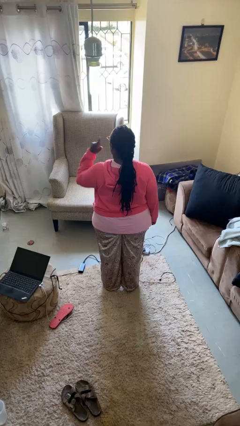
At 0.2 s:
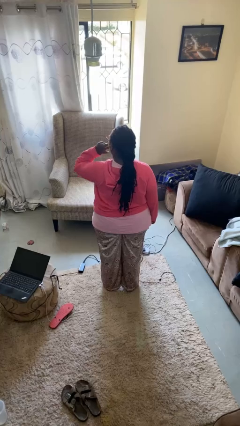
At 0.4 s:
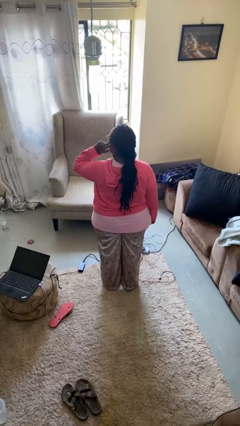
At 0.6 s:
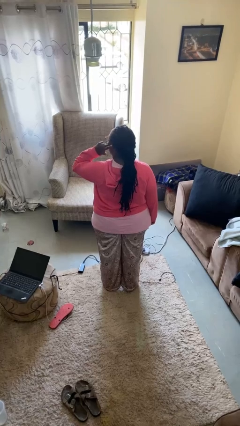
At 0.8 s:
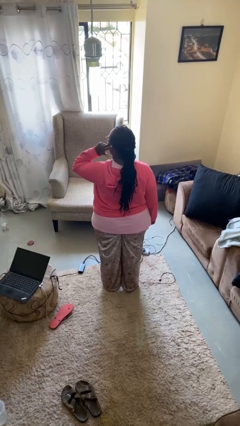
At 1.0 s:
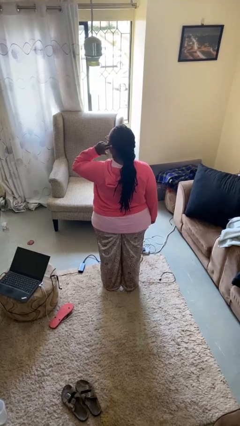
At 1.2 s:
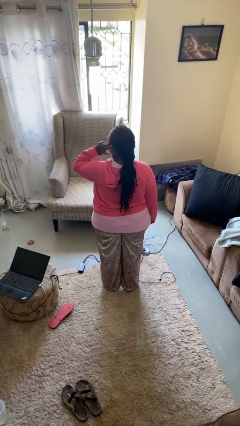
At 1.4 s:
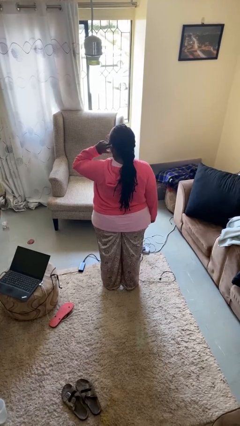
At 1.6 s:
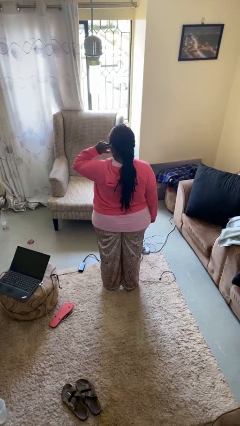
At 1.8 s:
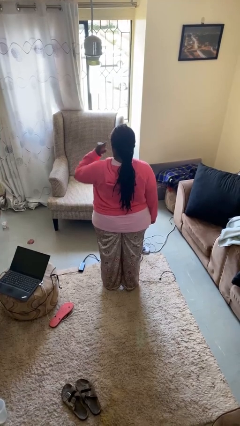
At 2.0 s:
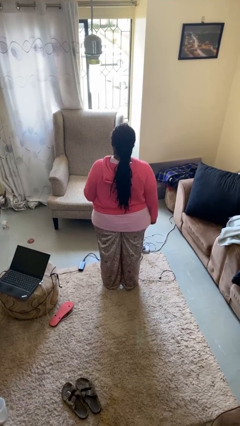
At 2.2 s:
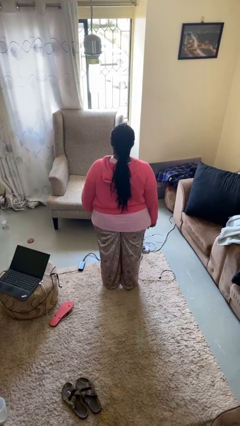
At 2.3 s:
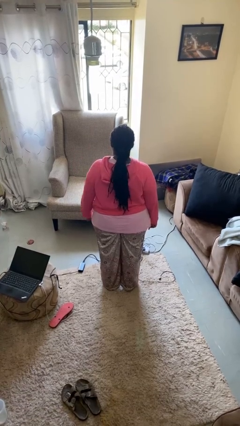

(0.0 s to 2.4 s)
person gestures listen closely

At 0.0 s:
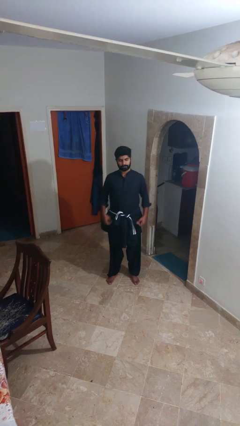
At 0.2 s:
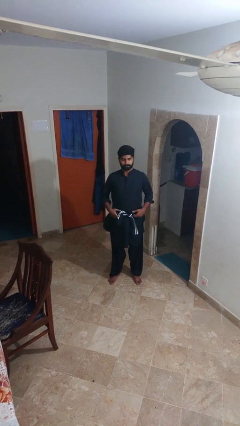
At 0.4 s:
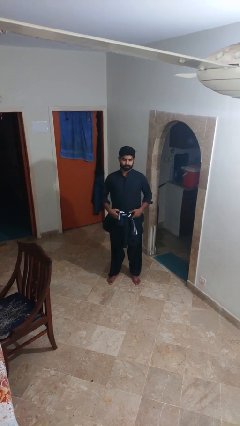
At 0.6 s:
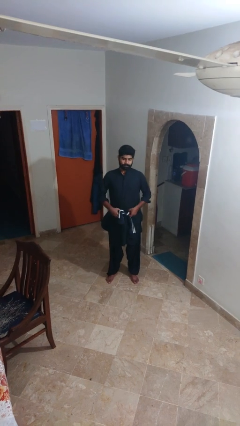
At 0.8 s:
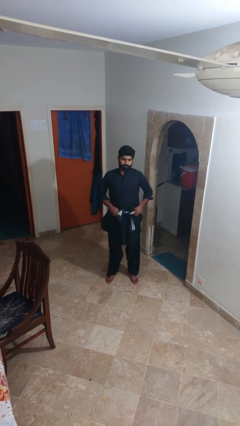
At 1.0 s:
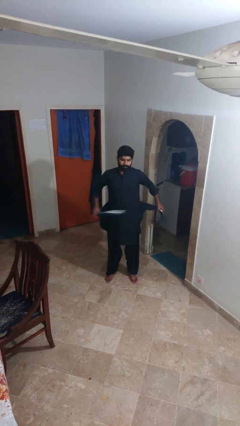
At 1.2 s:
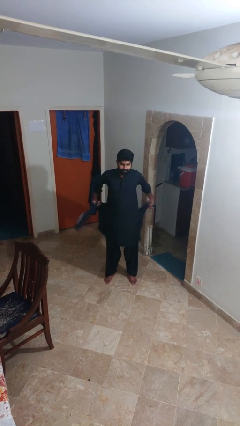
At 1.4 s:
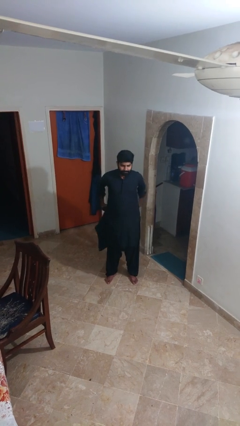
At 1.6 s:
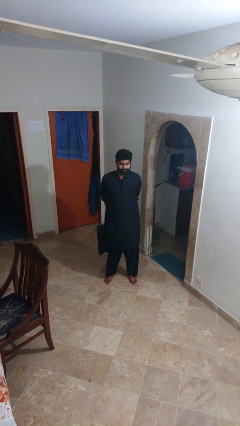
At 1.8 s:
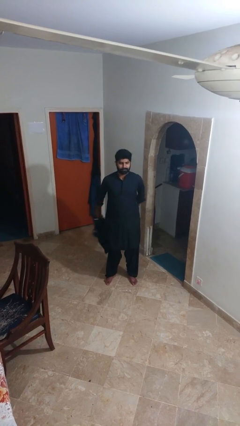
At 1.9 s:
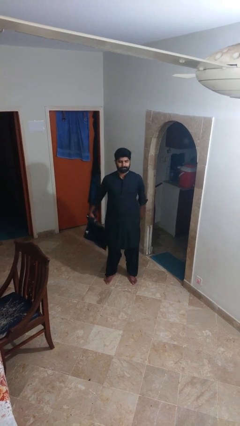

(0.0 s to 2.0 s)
person unties jacket around waist

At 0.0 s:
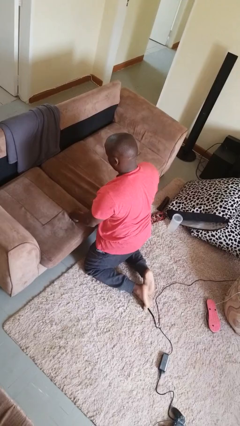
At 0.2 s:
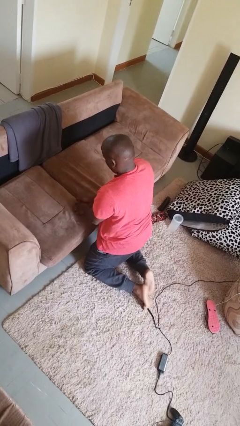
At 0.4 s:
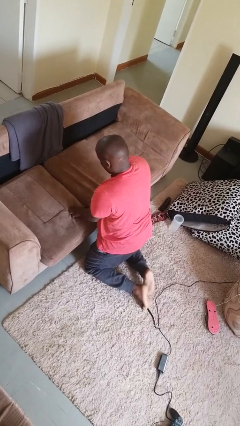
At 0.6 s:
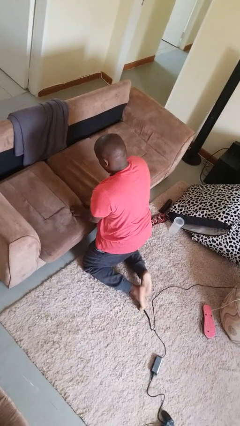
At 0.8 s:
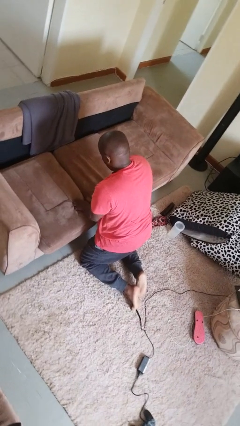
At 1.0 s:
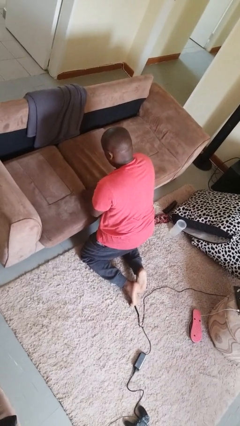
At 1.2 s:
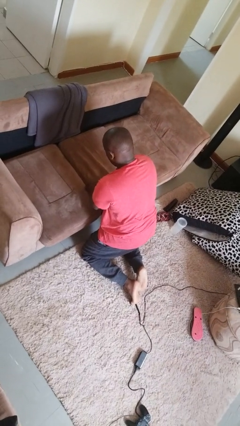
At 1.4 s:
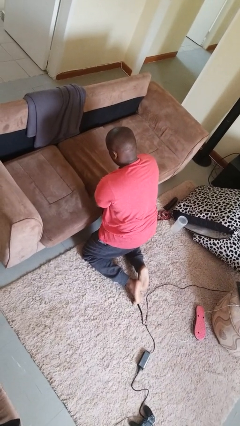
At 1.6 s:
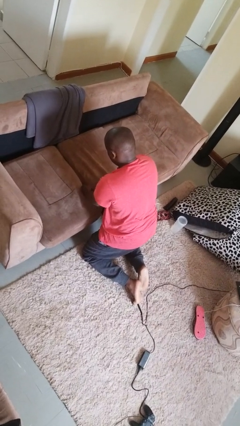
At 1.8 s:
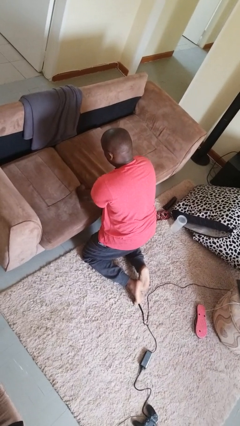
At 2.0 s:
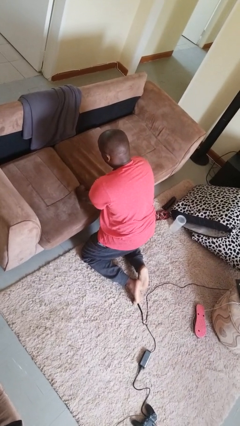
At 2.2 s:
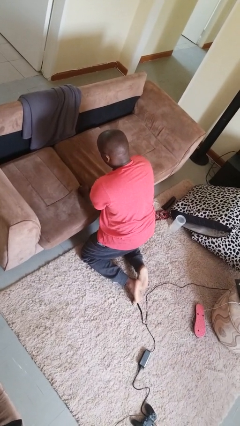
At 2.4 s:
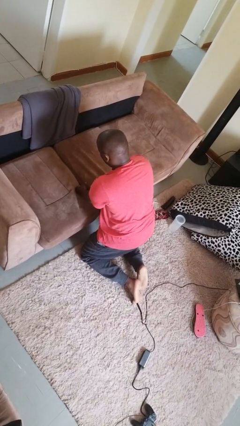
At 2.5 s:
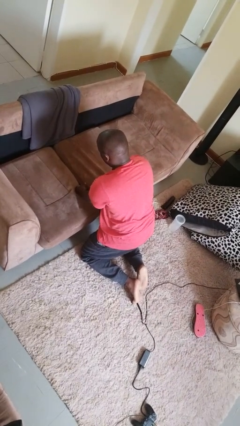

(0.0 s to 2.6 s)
person searches in couch

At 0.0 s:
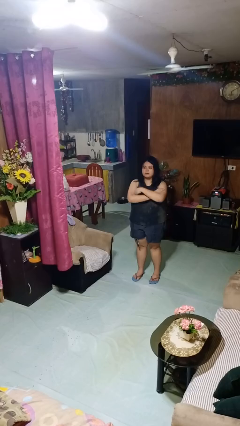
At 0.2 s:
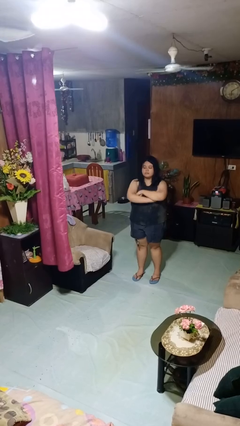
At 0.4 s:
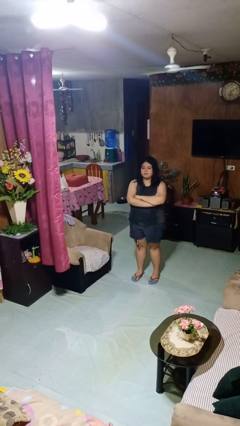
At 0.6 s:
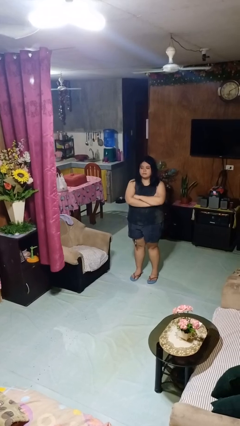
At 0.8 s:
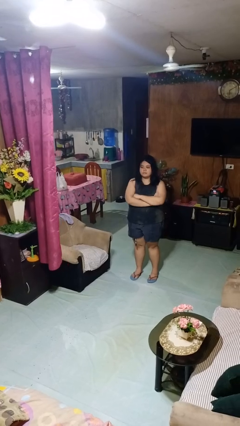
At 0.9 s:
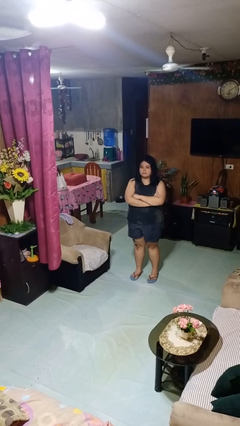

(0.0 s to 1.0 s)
person crosses arms

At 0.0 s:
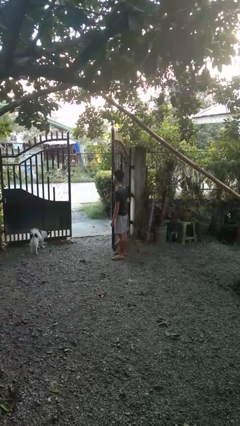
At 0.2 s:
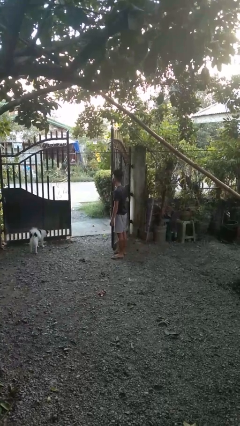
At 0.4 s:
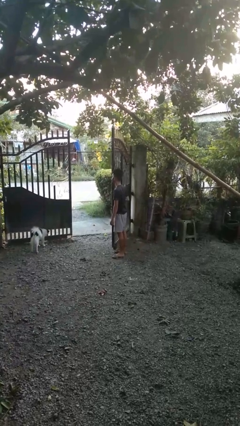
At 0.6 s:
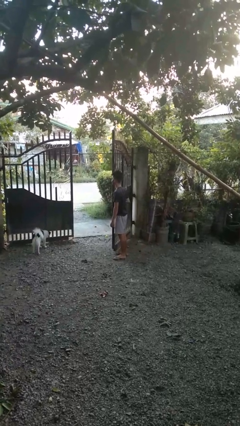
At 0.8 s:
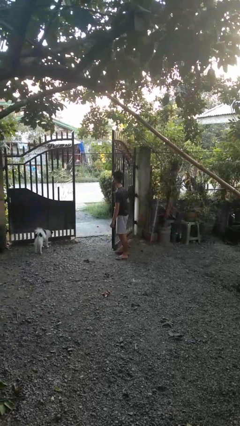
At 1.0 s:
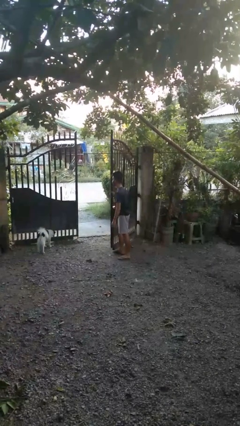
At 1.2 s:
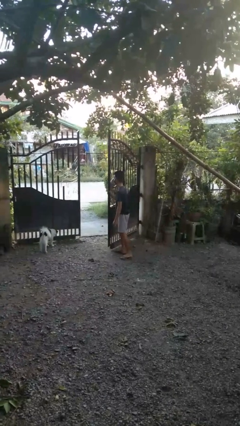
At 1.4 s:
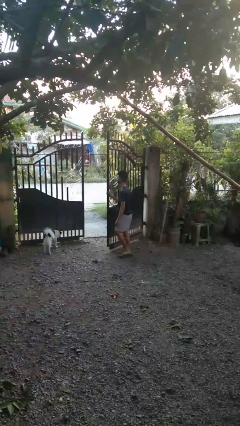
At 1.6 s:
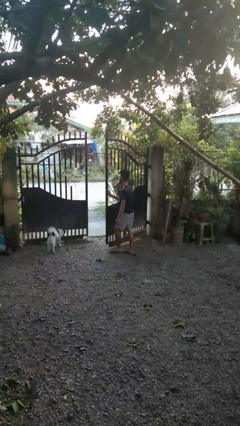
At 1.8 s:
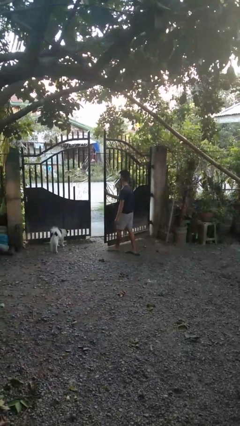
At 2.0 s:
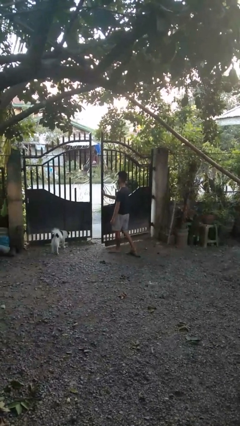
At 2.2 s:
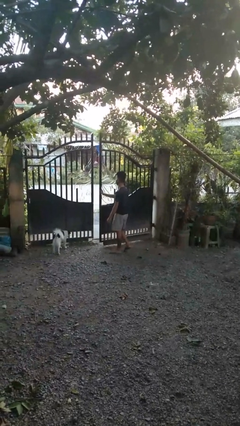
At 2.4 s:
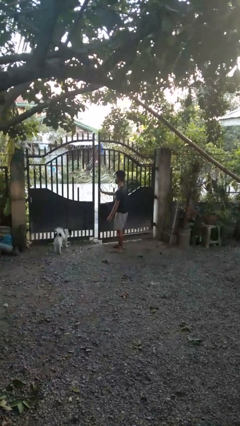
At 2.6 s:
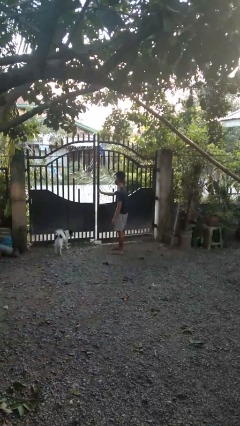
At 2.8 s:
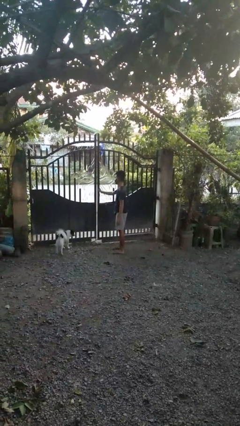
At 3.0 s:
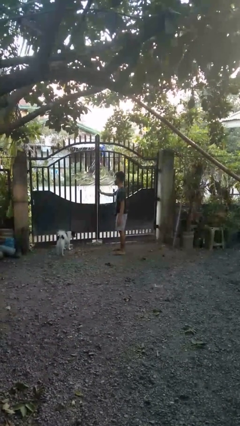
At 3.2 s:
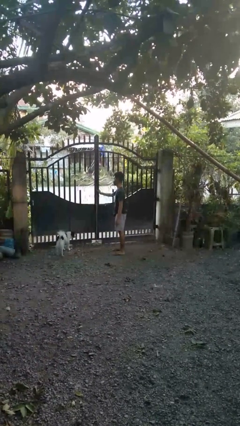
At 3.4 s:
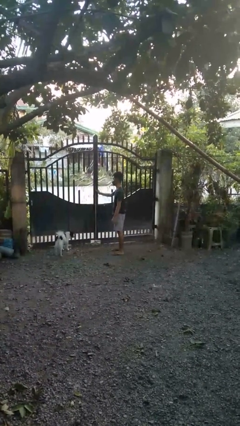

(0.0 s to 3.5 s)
person closes gate

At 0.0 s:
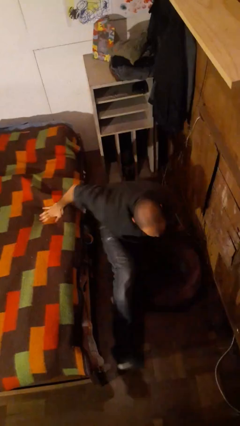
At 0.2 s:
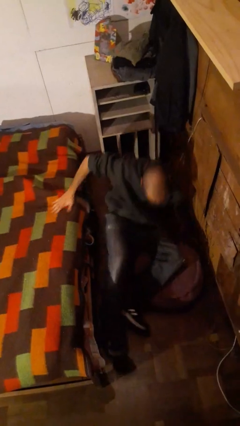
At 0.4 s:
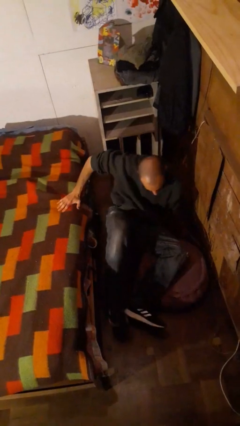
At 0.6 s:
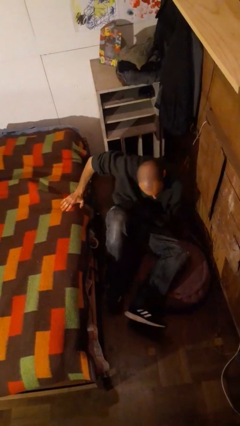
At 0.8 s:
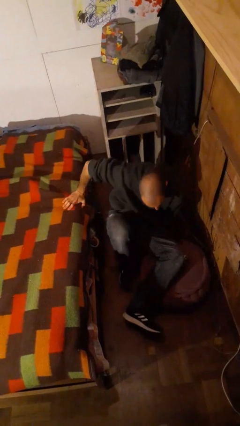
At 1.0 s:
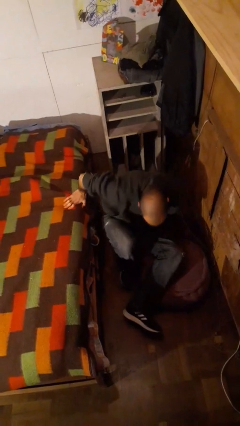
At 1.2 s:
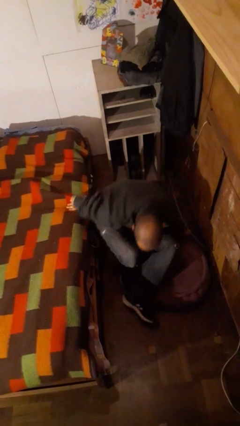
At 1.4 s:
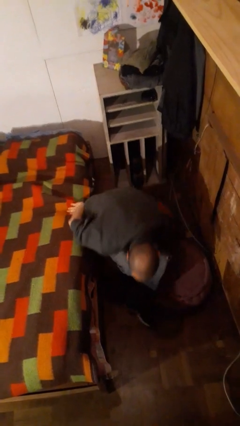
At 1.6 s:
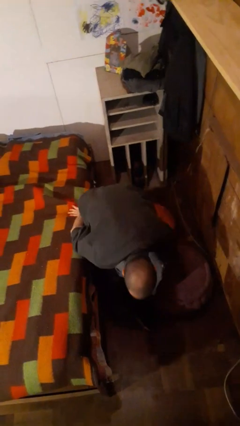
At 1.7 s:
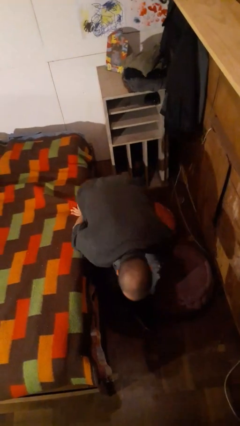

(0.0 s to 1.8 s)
person falls from bed

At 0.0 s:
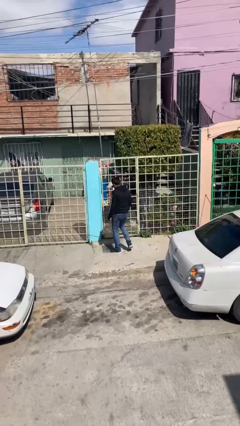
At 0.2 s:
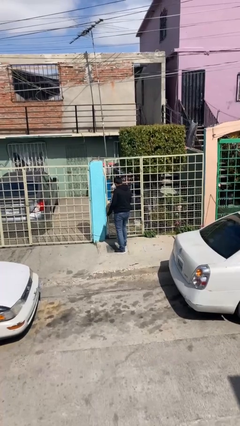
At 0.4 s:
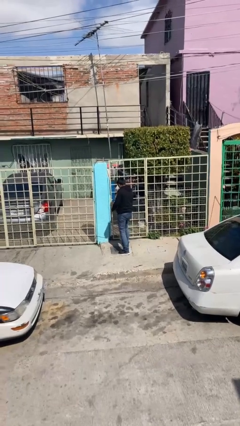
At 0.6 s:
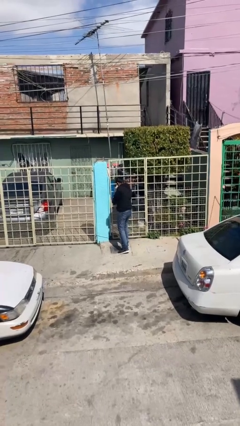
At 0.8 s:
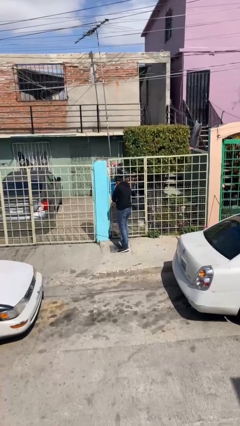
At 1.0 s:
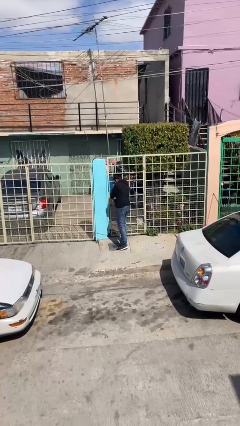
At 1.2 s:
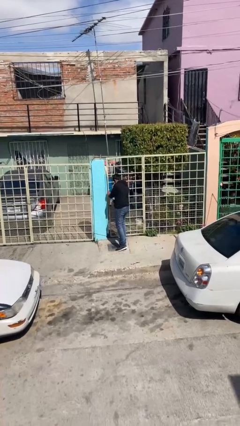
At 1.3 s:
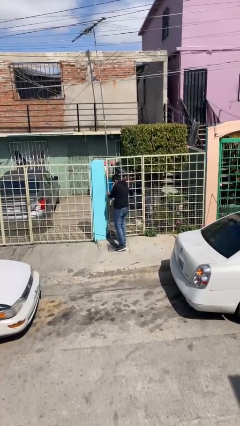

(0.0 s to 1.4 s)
person opens facility door

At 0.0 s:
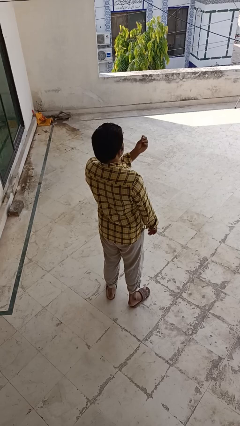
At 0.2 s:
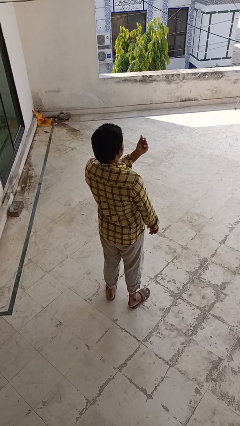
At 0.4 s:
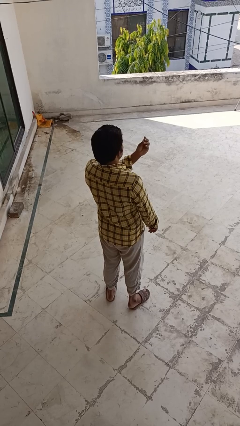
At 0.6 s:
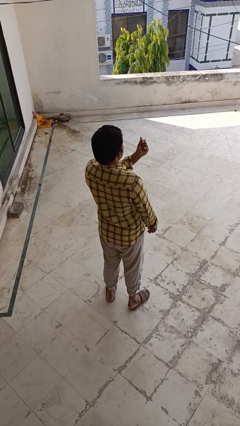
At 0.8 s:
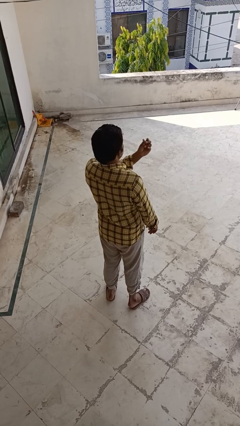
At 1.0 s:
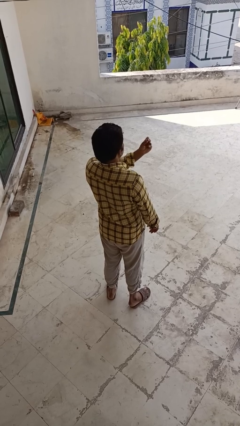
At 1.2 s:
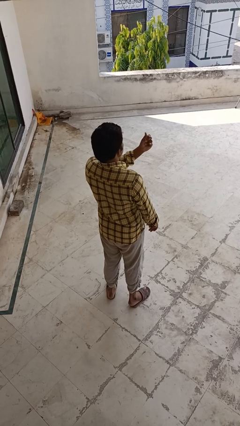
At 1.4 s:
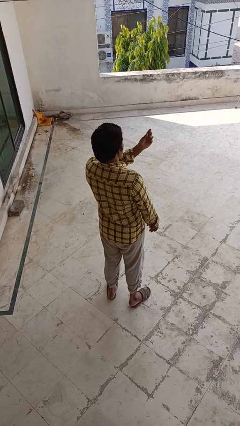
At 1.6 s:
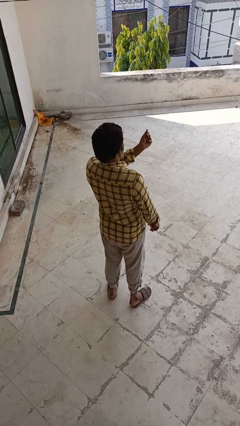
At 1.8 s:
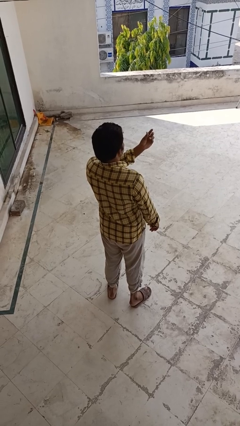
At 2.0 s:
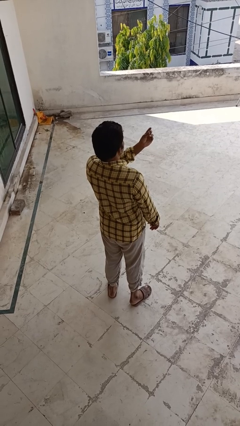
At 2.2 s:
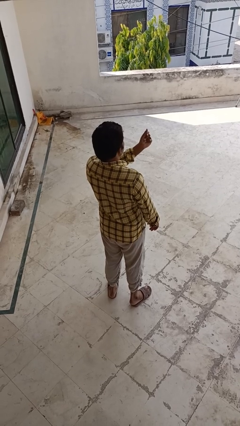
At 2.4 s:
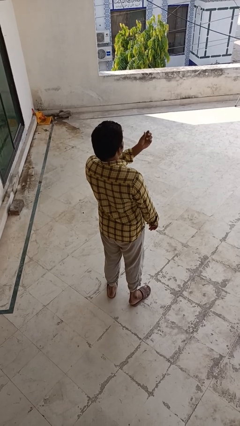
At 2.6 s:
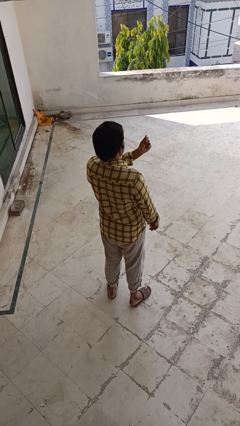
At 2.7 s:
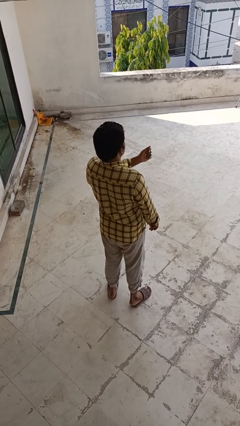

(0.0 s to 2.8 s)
person snaps fingers
